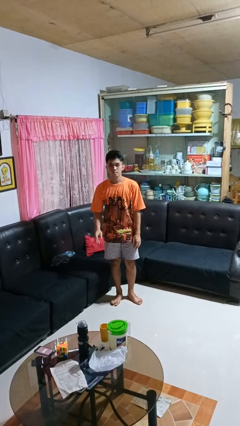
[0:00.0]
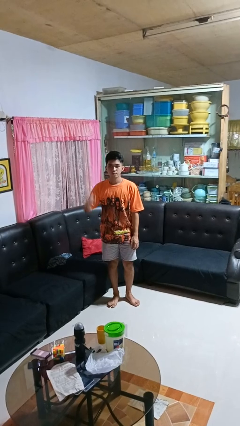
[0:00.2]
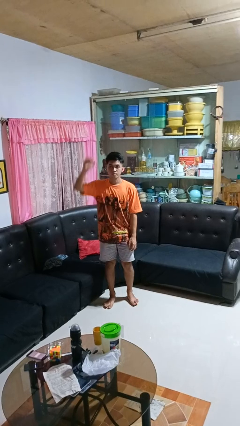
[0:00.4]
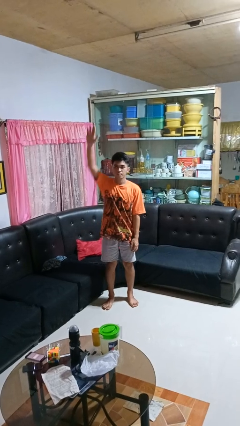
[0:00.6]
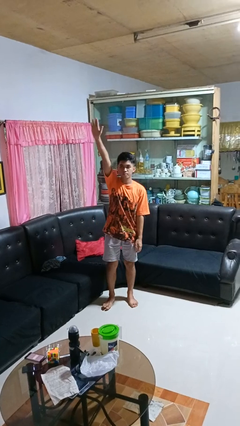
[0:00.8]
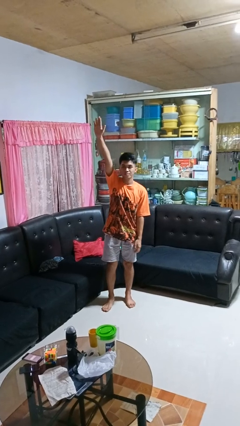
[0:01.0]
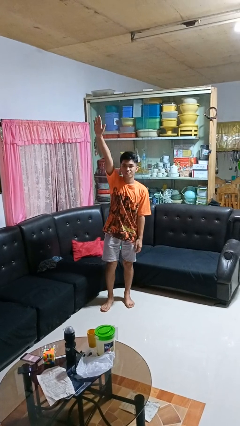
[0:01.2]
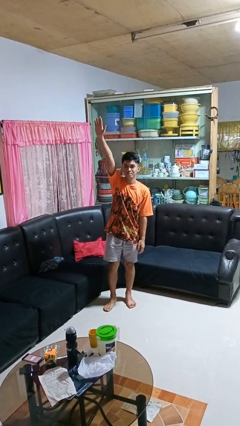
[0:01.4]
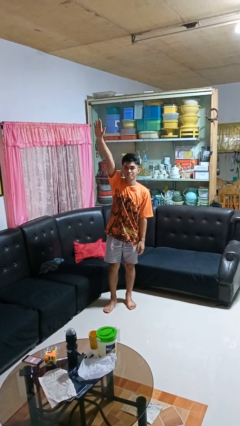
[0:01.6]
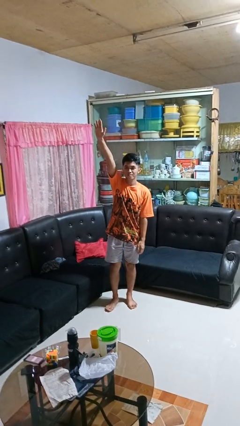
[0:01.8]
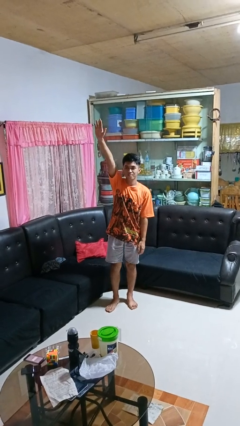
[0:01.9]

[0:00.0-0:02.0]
person gestures raise hand

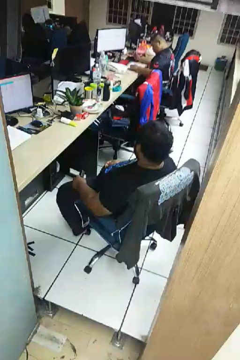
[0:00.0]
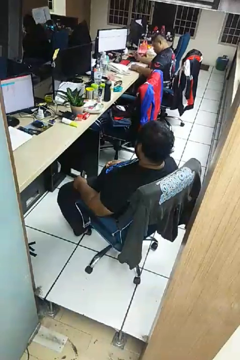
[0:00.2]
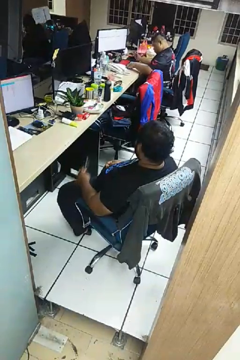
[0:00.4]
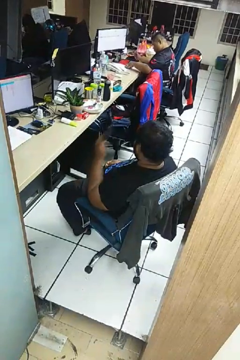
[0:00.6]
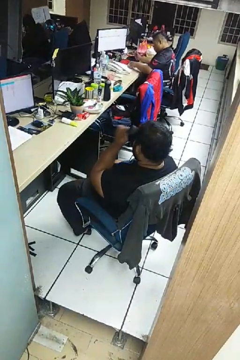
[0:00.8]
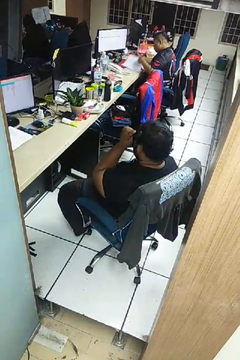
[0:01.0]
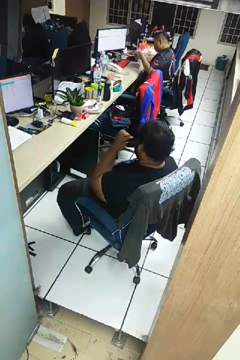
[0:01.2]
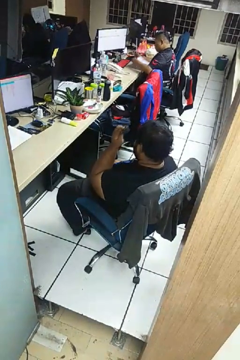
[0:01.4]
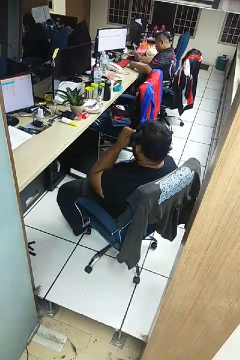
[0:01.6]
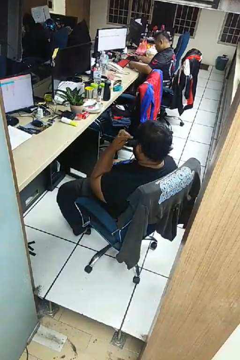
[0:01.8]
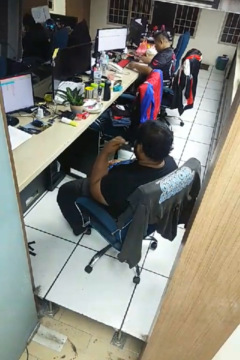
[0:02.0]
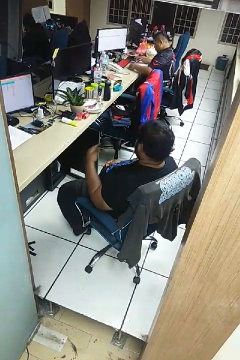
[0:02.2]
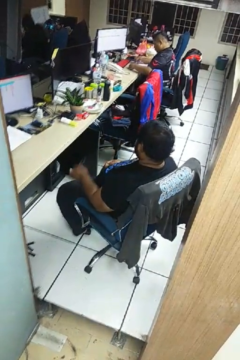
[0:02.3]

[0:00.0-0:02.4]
person brushes hair

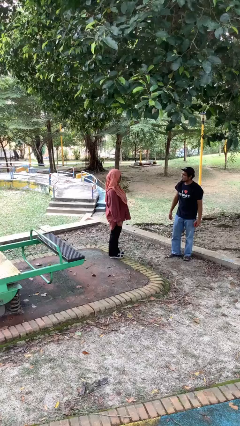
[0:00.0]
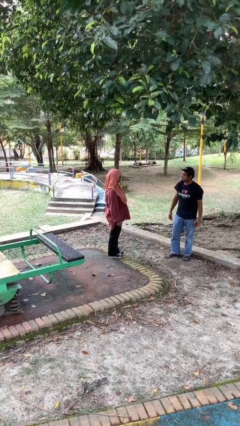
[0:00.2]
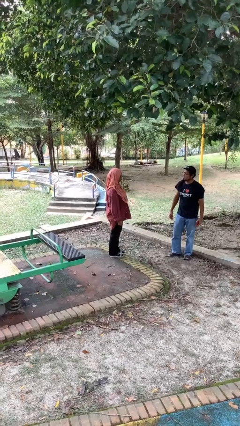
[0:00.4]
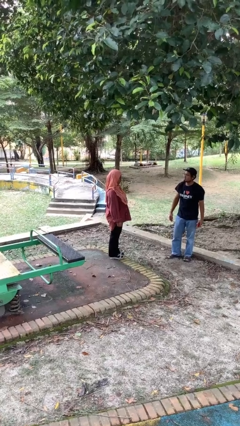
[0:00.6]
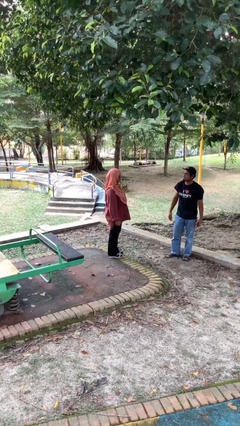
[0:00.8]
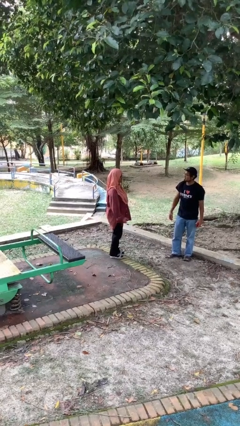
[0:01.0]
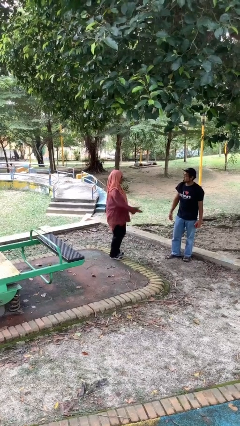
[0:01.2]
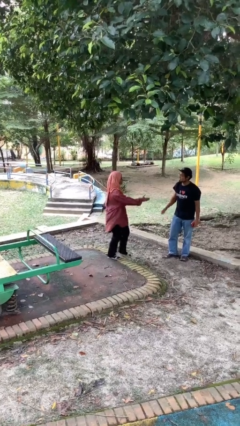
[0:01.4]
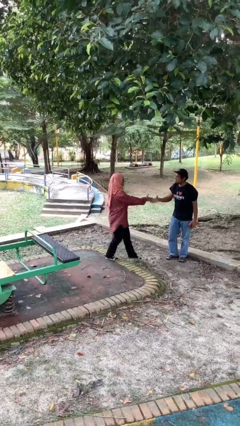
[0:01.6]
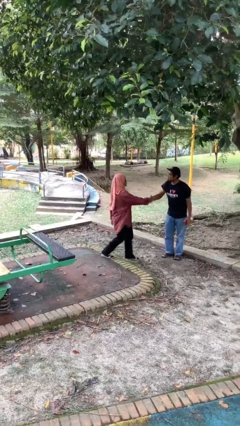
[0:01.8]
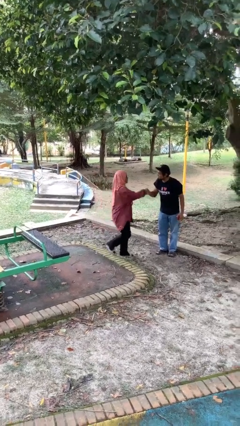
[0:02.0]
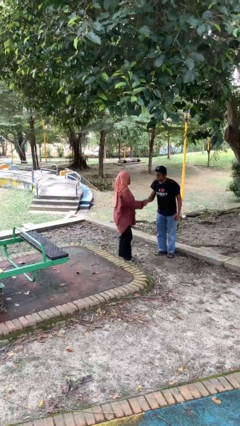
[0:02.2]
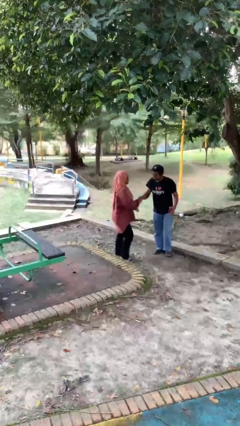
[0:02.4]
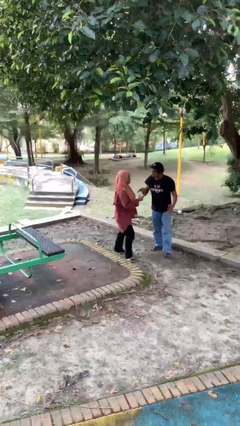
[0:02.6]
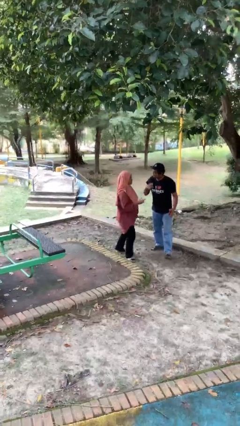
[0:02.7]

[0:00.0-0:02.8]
person shakes hand

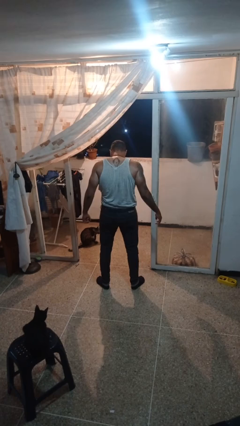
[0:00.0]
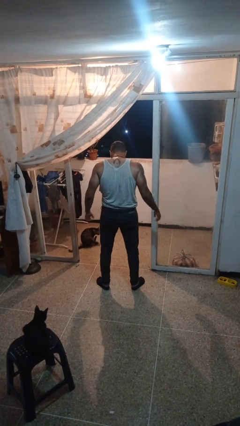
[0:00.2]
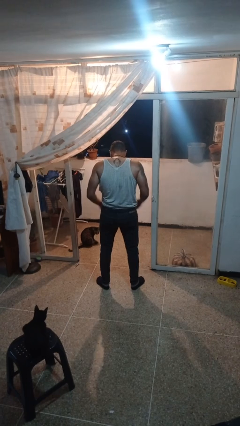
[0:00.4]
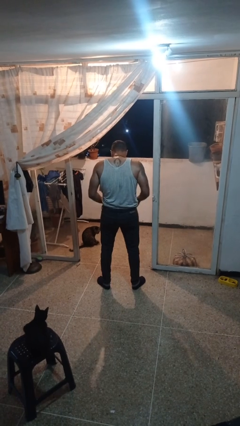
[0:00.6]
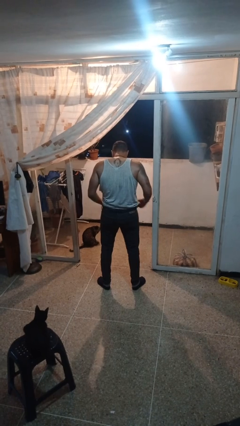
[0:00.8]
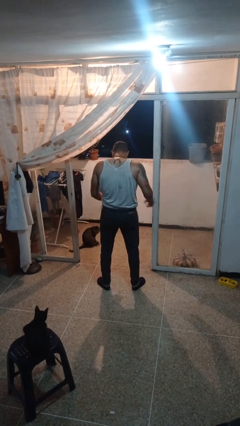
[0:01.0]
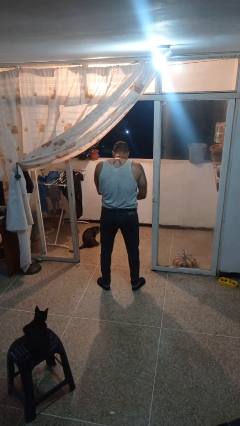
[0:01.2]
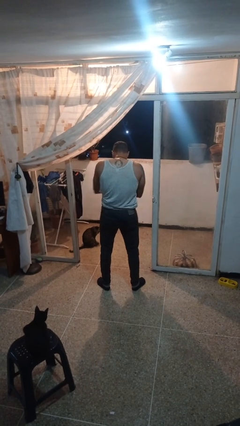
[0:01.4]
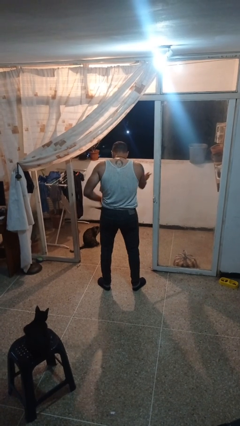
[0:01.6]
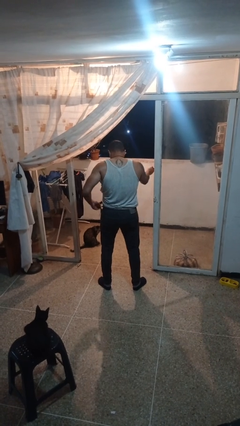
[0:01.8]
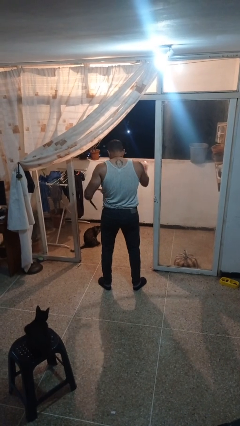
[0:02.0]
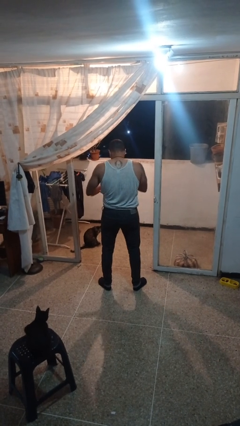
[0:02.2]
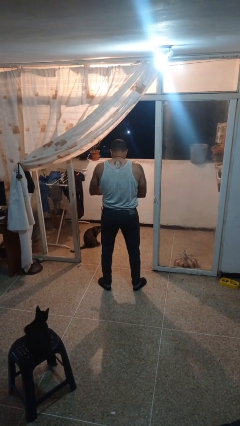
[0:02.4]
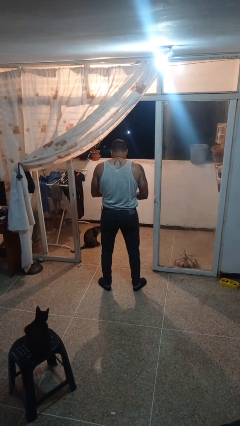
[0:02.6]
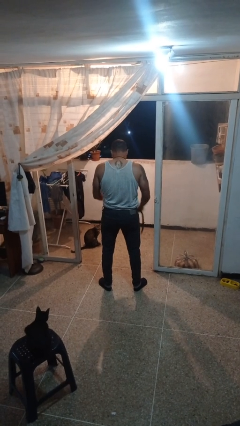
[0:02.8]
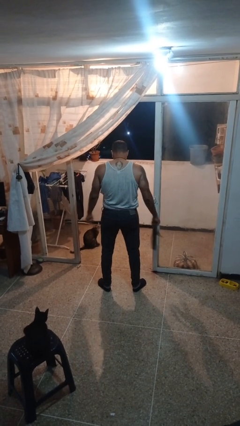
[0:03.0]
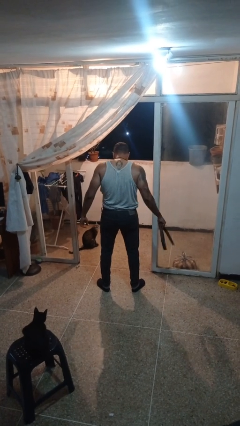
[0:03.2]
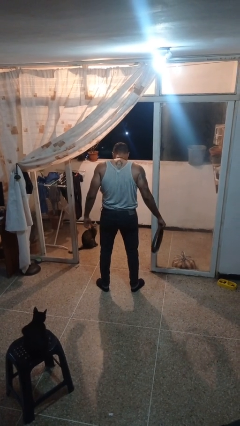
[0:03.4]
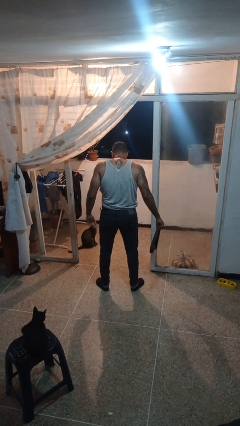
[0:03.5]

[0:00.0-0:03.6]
person takes off belt

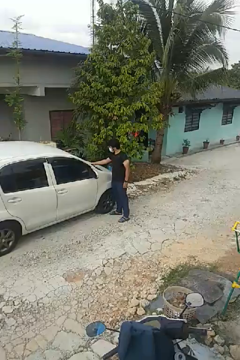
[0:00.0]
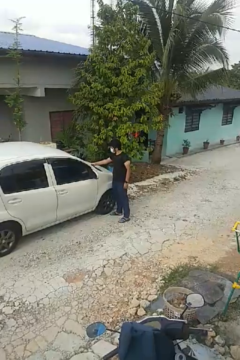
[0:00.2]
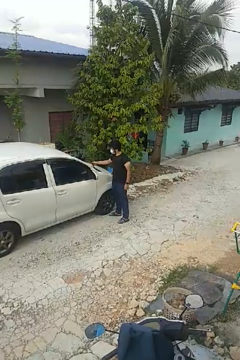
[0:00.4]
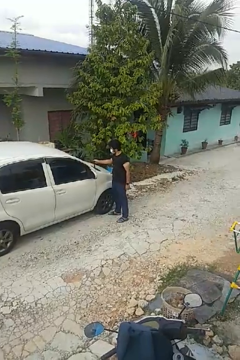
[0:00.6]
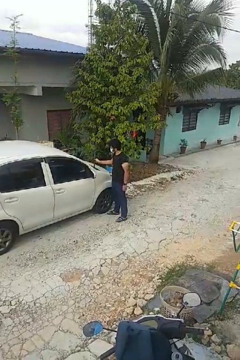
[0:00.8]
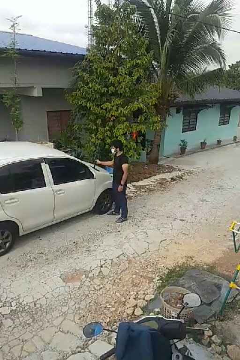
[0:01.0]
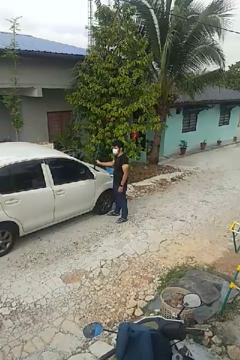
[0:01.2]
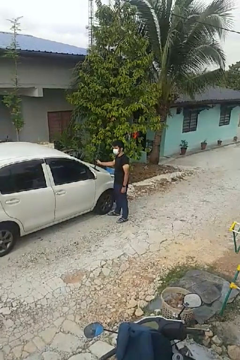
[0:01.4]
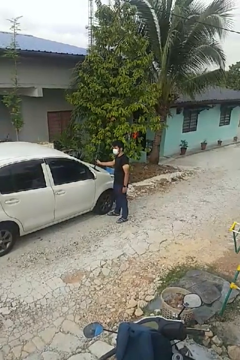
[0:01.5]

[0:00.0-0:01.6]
person flips up car wipers

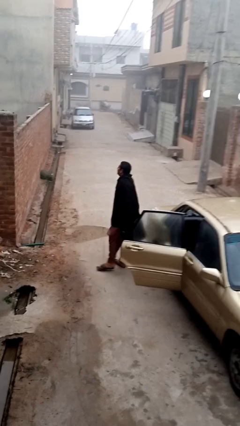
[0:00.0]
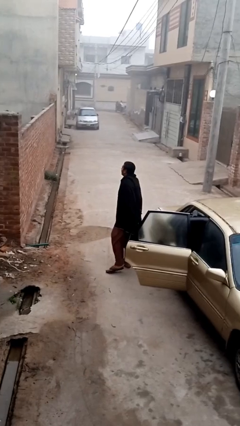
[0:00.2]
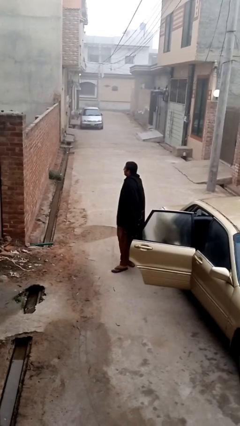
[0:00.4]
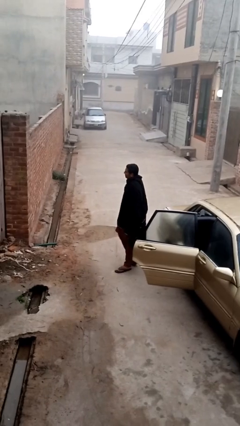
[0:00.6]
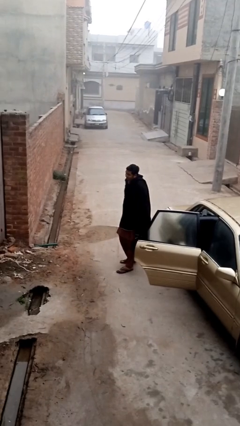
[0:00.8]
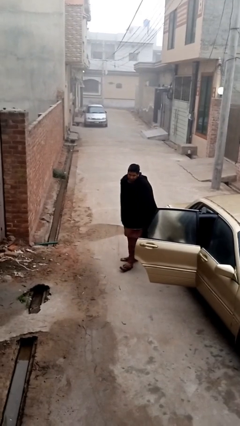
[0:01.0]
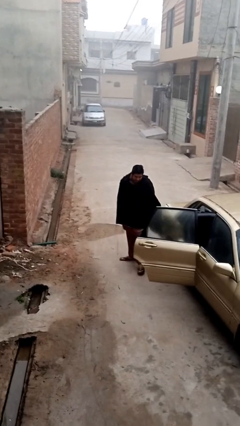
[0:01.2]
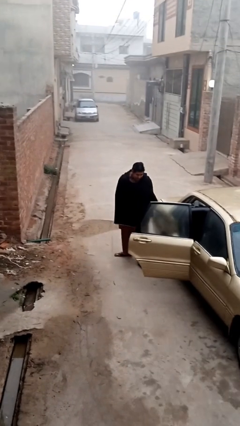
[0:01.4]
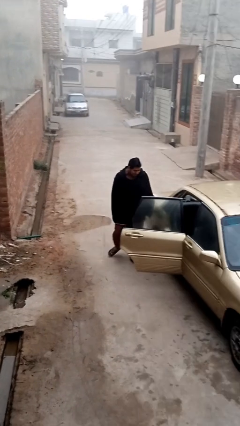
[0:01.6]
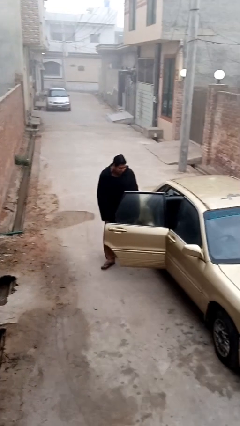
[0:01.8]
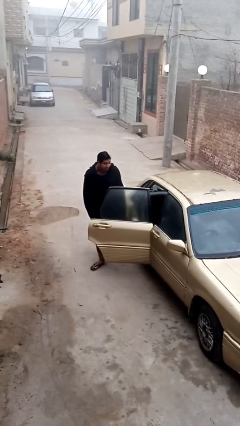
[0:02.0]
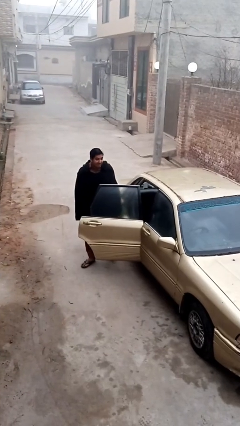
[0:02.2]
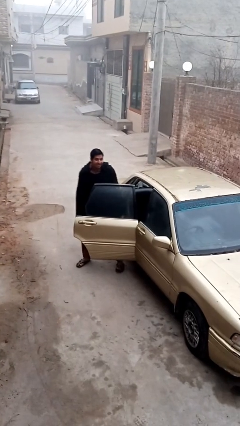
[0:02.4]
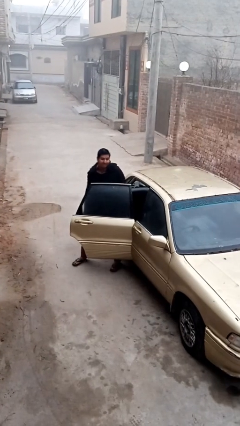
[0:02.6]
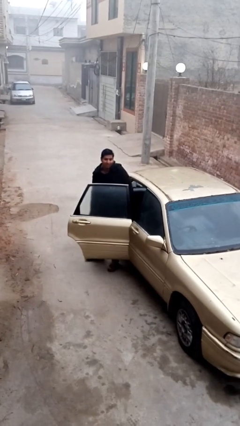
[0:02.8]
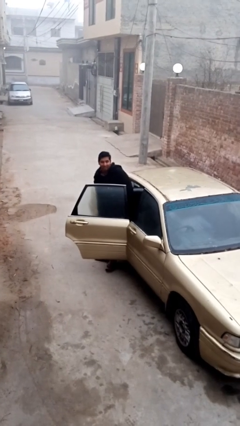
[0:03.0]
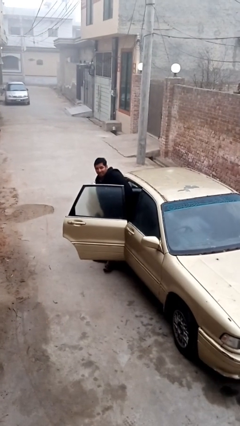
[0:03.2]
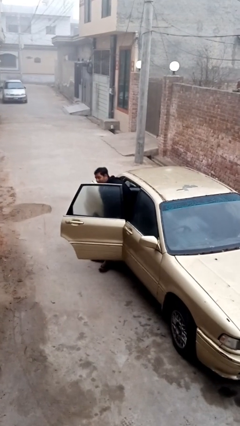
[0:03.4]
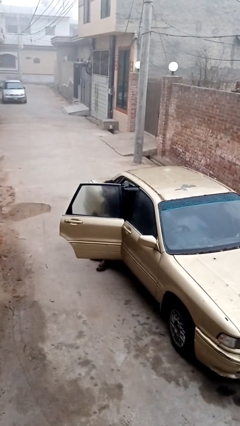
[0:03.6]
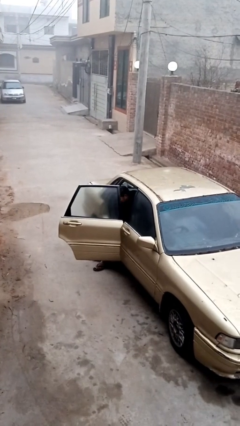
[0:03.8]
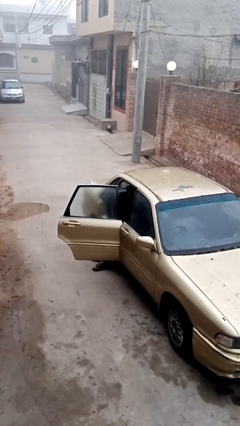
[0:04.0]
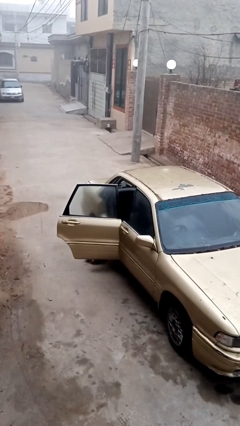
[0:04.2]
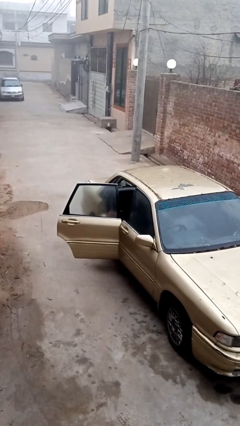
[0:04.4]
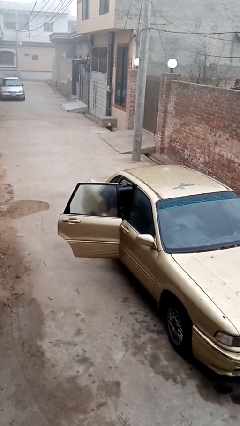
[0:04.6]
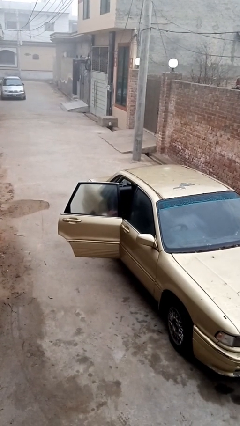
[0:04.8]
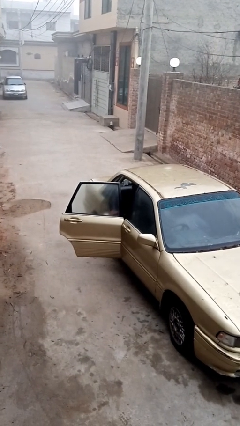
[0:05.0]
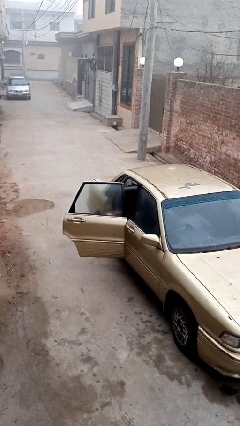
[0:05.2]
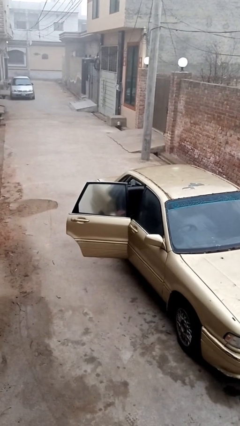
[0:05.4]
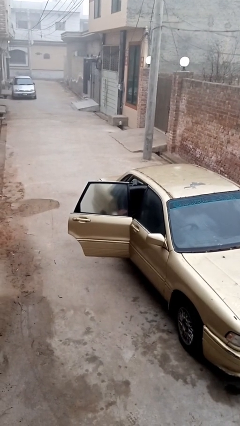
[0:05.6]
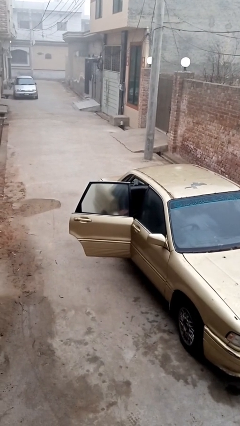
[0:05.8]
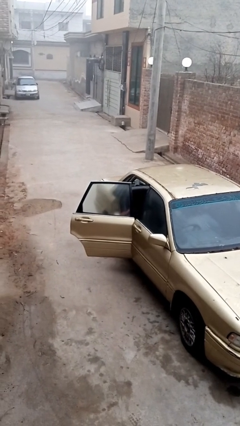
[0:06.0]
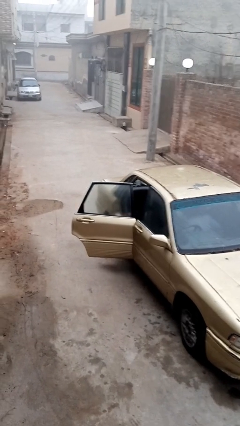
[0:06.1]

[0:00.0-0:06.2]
person enters car
